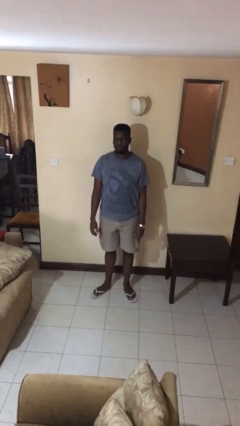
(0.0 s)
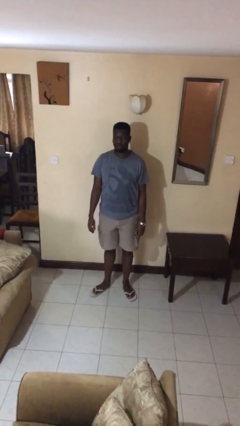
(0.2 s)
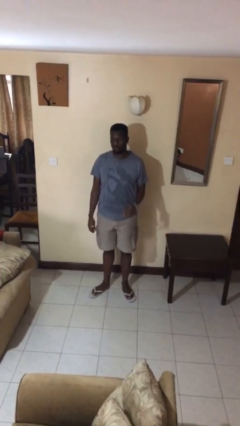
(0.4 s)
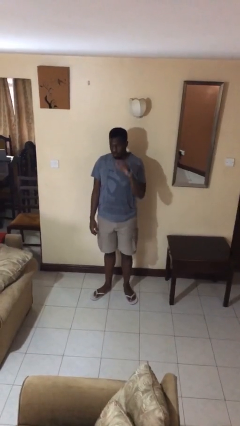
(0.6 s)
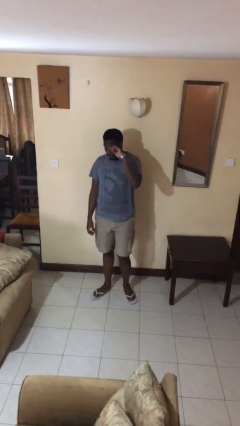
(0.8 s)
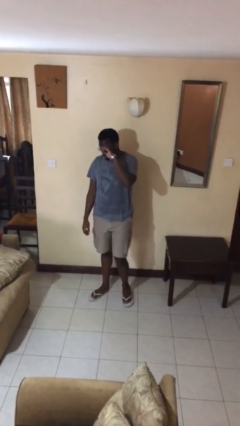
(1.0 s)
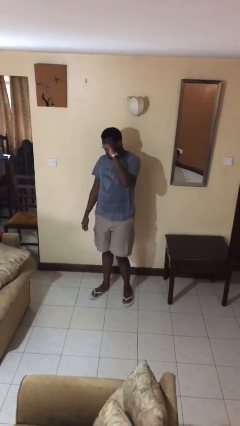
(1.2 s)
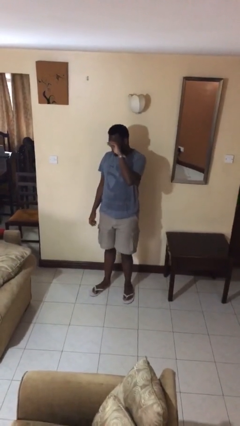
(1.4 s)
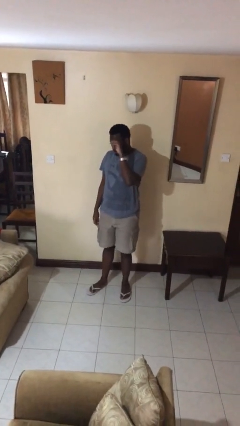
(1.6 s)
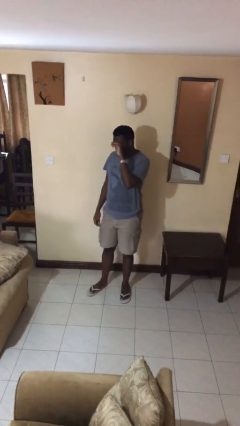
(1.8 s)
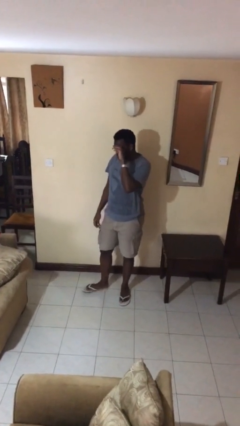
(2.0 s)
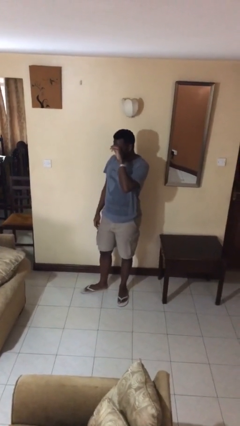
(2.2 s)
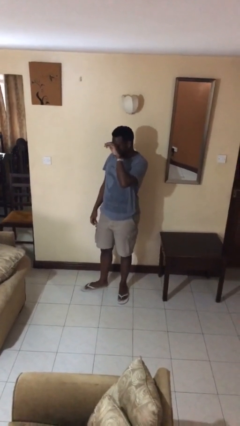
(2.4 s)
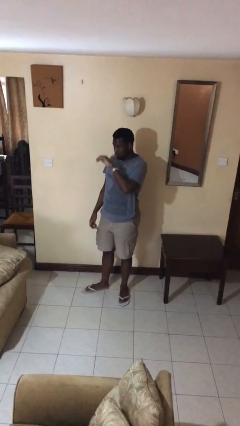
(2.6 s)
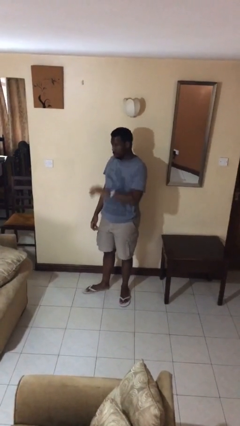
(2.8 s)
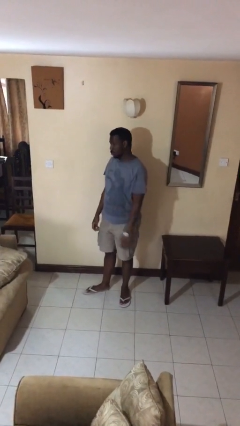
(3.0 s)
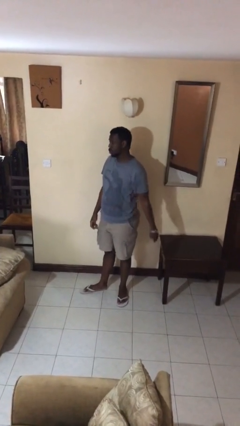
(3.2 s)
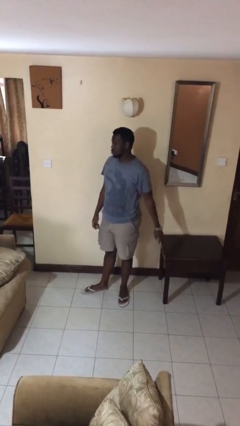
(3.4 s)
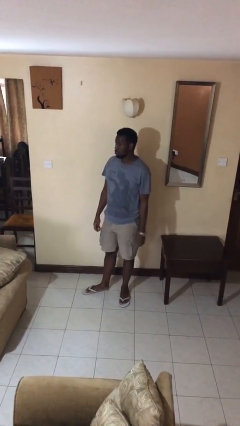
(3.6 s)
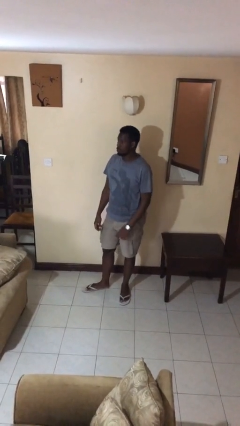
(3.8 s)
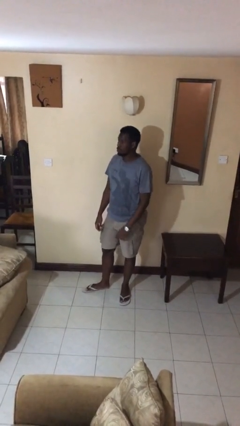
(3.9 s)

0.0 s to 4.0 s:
person rubs eyes

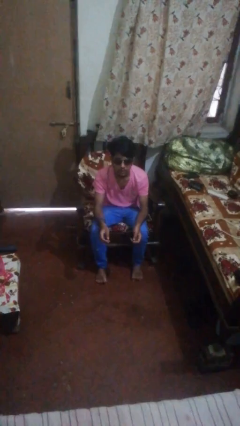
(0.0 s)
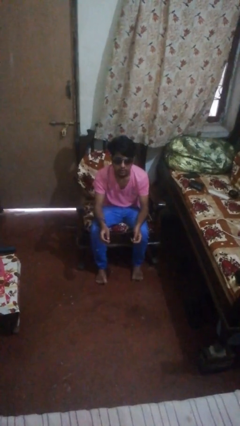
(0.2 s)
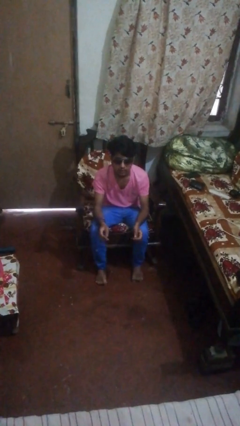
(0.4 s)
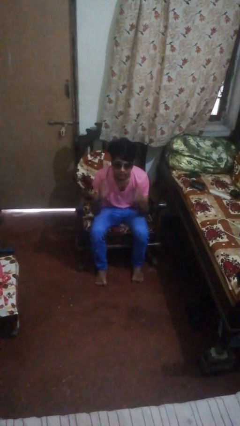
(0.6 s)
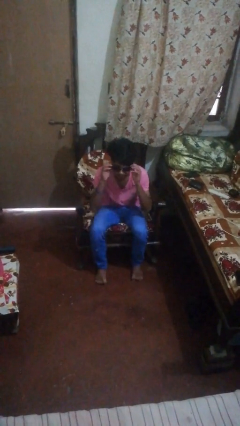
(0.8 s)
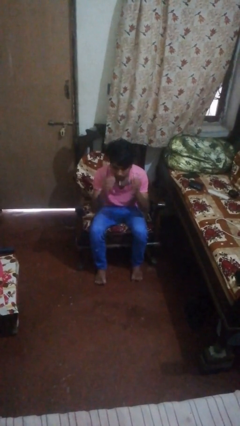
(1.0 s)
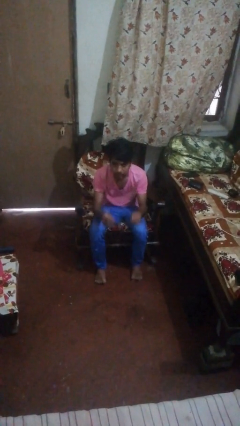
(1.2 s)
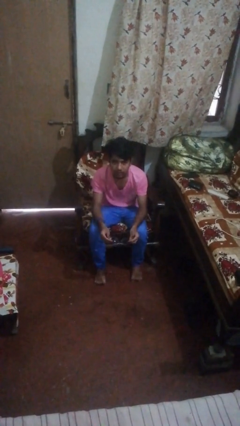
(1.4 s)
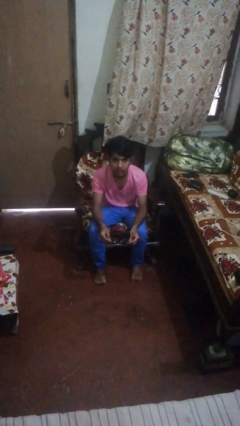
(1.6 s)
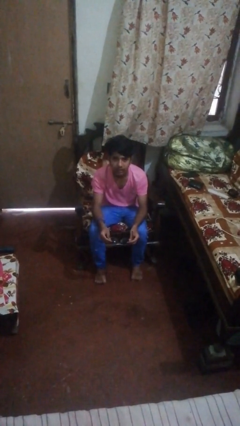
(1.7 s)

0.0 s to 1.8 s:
person takes off sunglasses

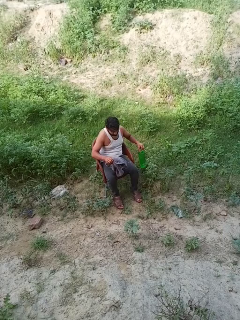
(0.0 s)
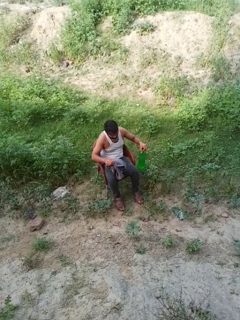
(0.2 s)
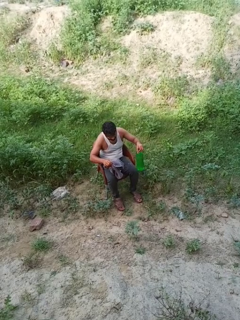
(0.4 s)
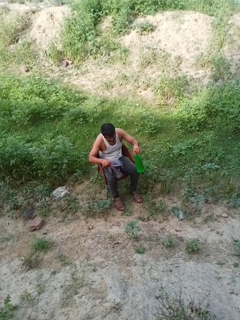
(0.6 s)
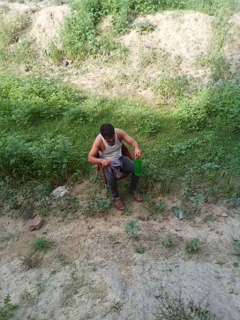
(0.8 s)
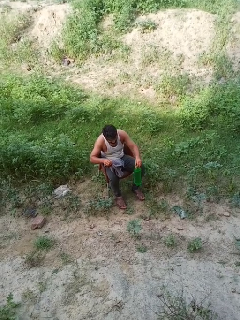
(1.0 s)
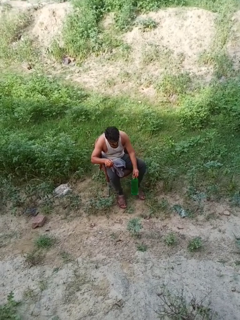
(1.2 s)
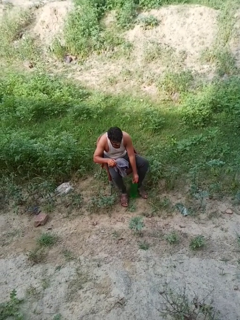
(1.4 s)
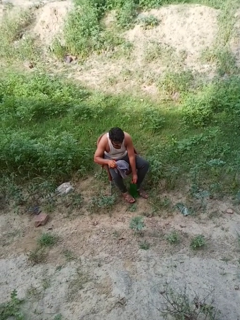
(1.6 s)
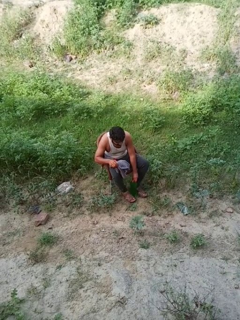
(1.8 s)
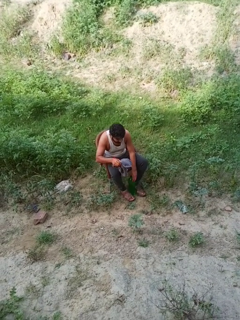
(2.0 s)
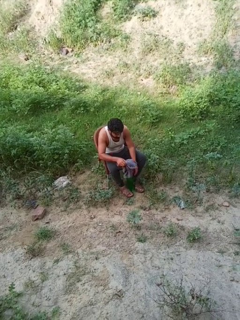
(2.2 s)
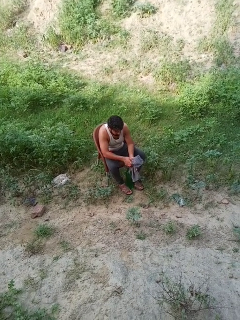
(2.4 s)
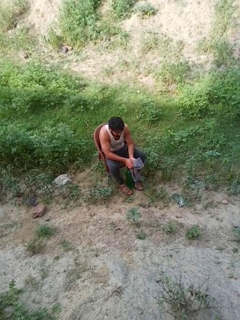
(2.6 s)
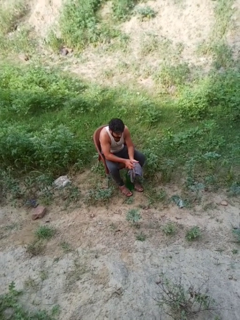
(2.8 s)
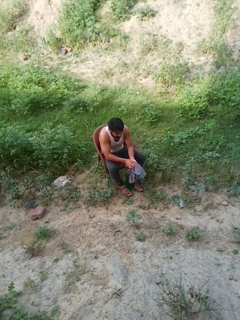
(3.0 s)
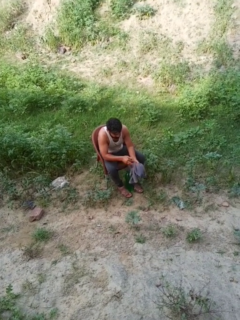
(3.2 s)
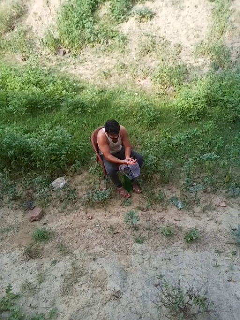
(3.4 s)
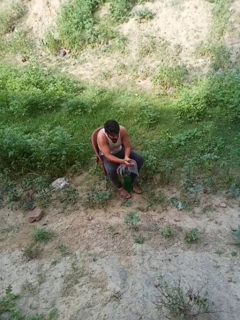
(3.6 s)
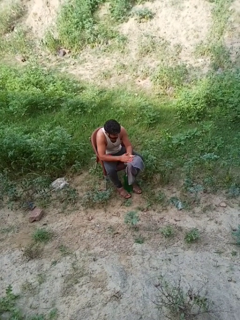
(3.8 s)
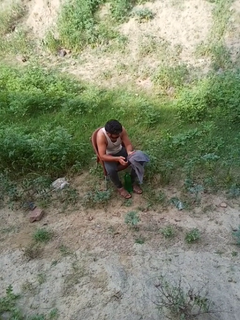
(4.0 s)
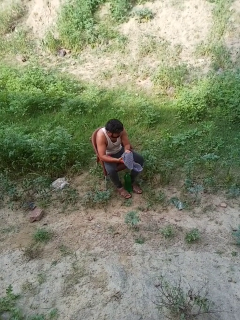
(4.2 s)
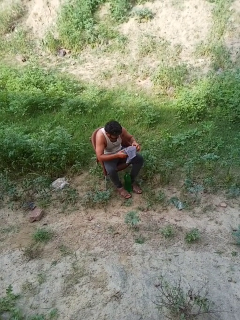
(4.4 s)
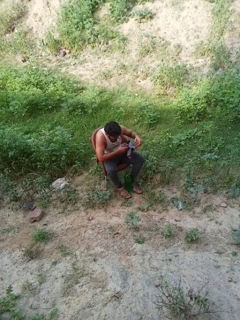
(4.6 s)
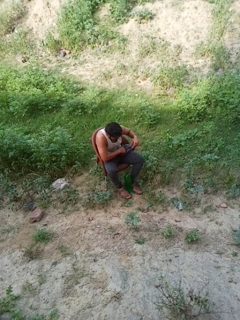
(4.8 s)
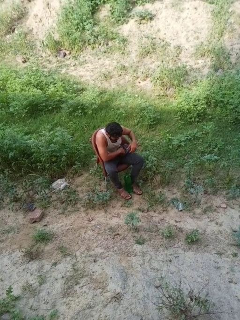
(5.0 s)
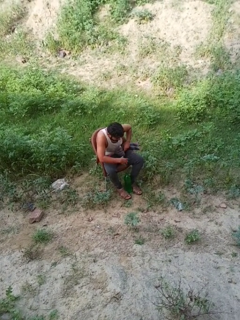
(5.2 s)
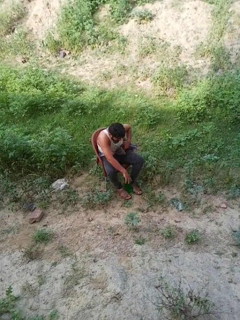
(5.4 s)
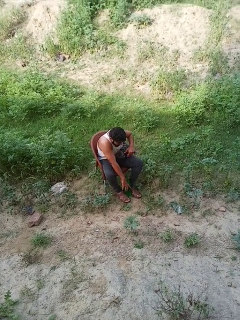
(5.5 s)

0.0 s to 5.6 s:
person dries hands with towel

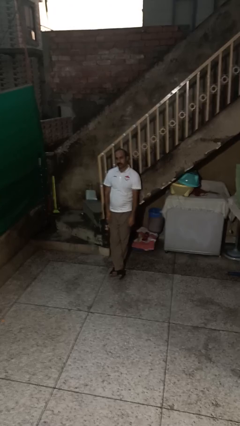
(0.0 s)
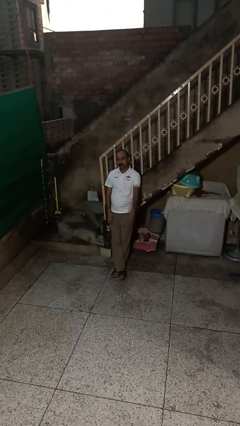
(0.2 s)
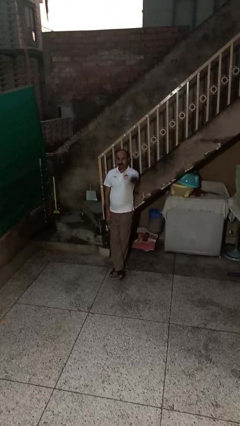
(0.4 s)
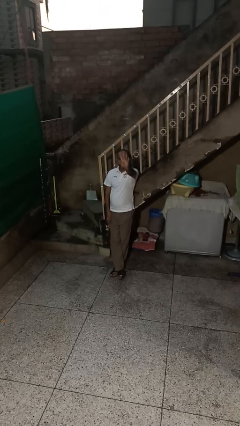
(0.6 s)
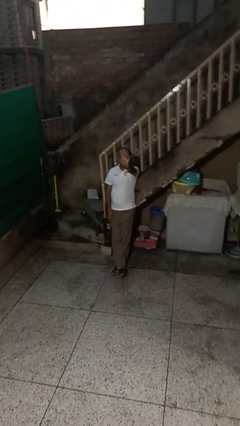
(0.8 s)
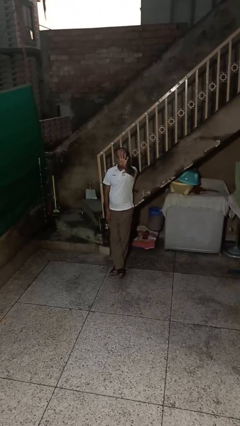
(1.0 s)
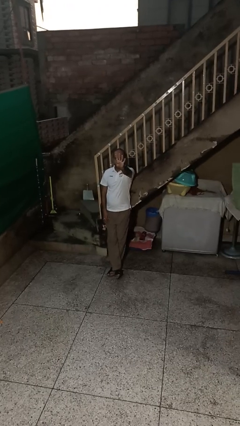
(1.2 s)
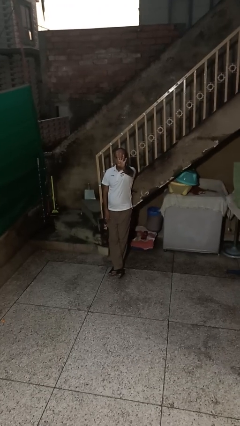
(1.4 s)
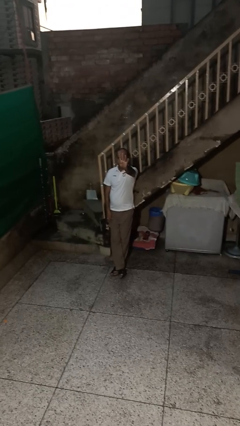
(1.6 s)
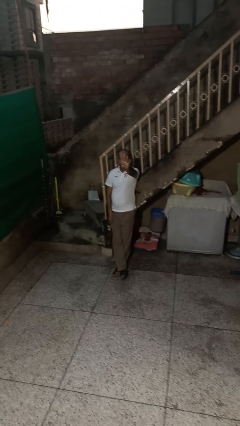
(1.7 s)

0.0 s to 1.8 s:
person gestures number four

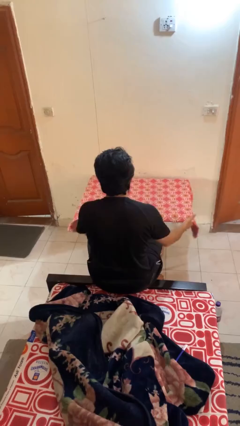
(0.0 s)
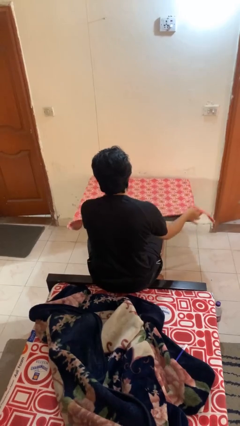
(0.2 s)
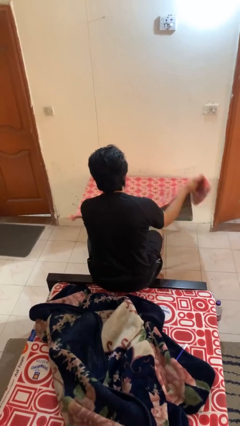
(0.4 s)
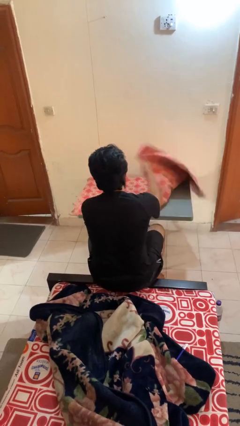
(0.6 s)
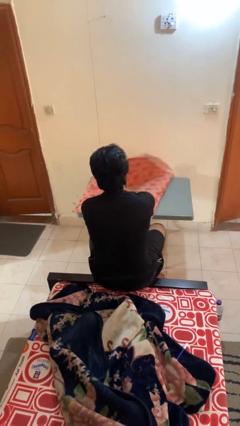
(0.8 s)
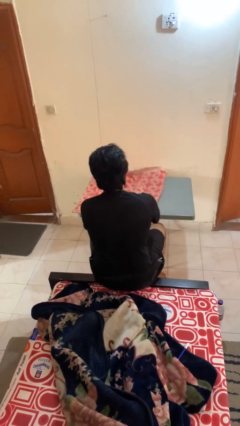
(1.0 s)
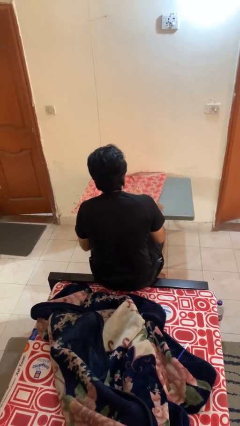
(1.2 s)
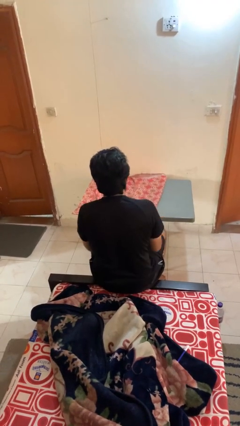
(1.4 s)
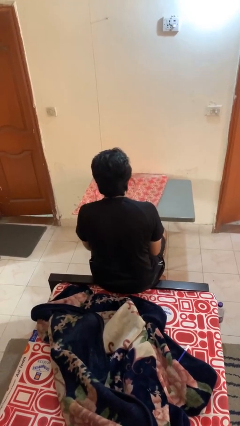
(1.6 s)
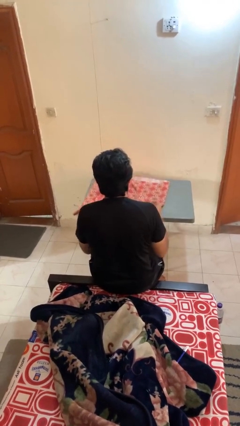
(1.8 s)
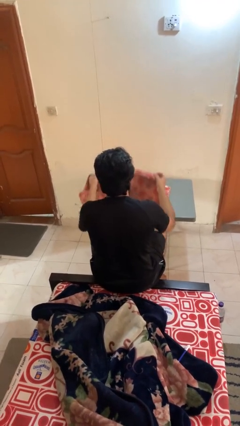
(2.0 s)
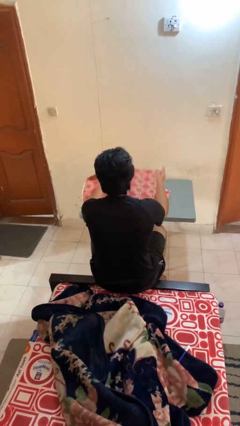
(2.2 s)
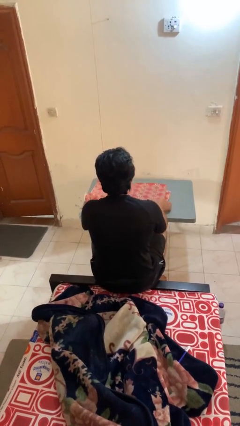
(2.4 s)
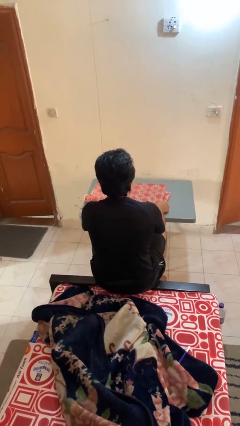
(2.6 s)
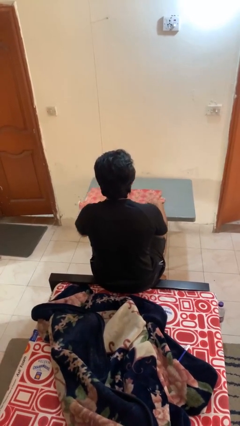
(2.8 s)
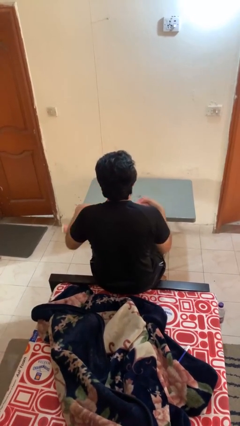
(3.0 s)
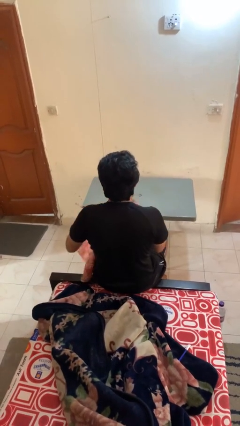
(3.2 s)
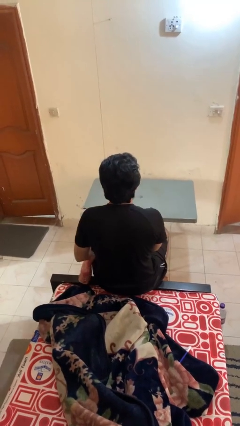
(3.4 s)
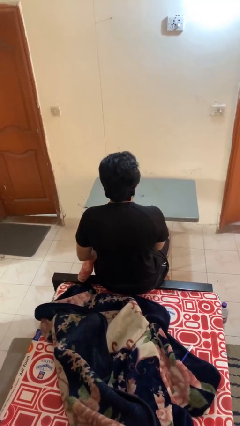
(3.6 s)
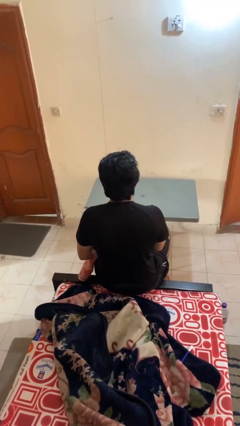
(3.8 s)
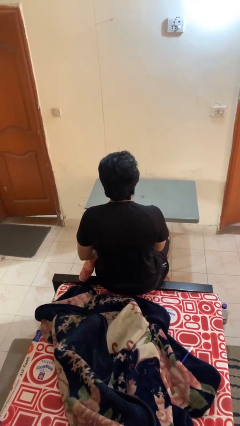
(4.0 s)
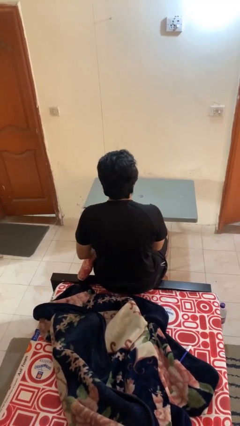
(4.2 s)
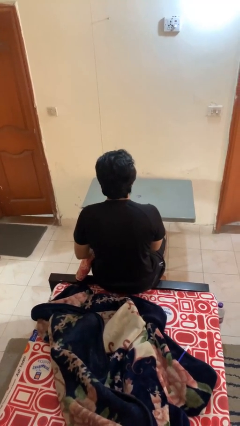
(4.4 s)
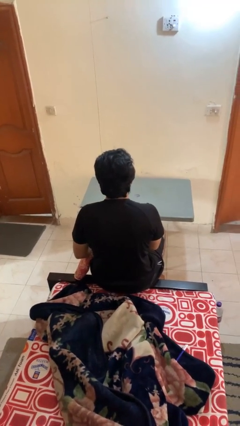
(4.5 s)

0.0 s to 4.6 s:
person folds tablecloth

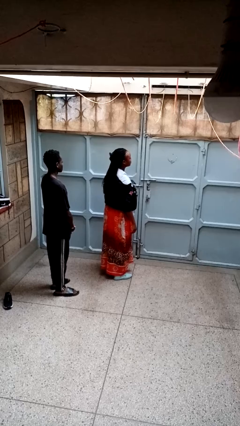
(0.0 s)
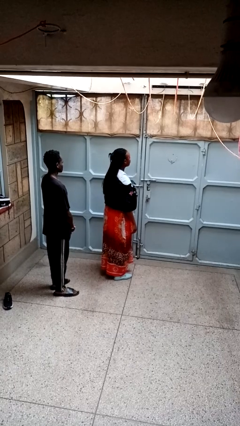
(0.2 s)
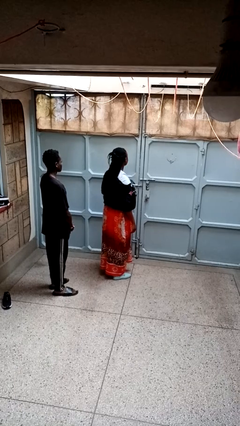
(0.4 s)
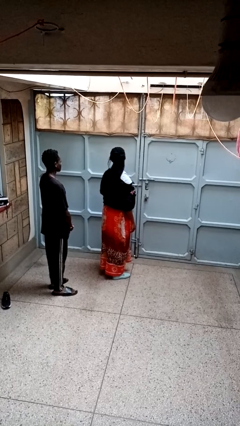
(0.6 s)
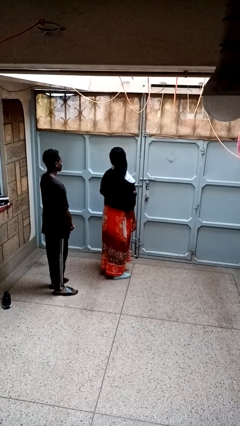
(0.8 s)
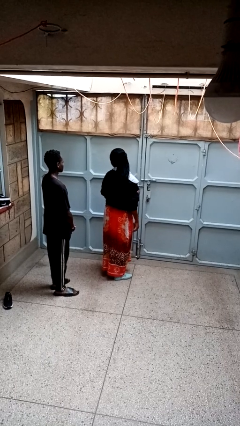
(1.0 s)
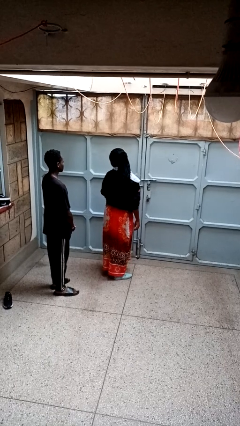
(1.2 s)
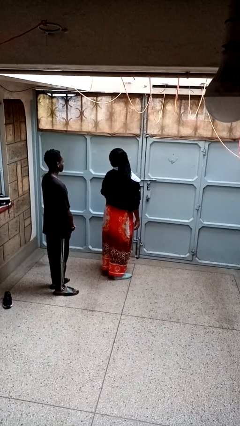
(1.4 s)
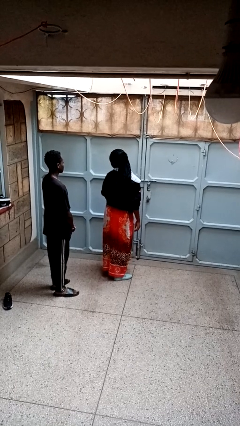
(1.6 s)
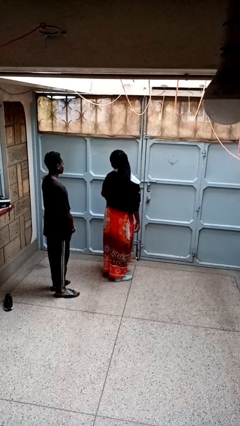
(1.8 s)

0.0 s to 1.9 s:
person looks over shoulder
